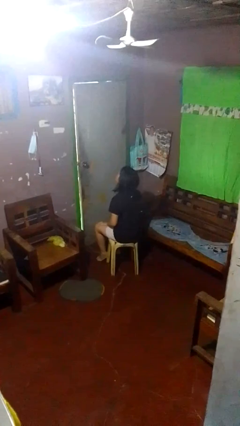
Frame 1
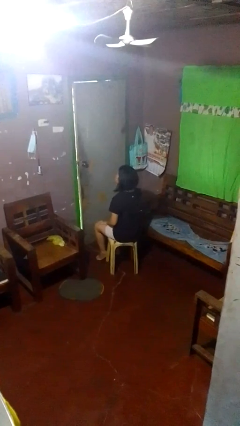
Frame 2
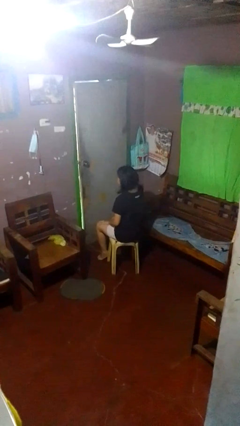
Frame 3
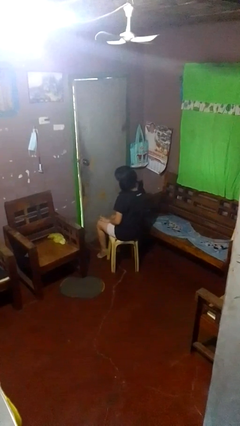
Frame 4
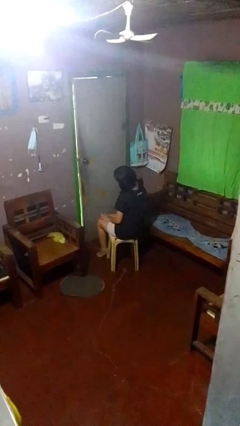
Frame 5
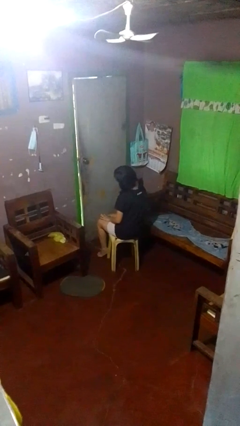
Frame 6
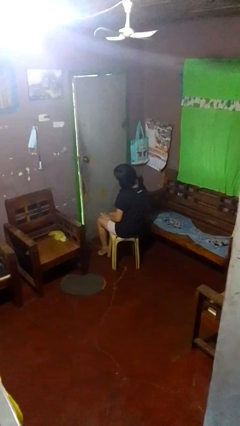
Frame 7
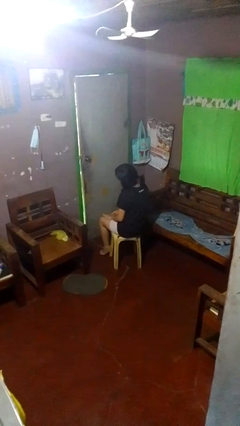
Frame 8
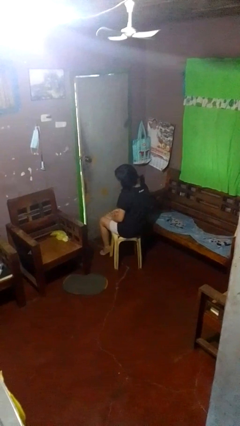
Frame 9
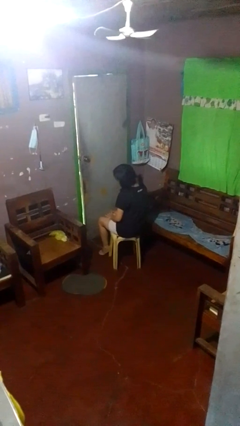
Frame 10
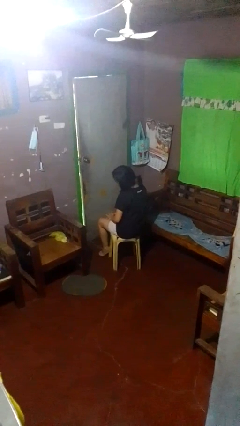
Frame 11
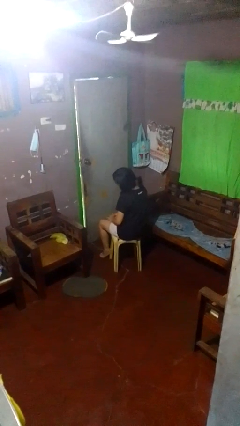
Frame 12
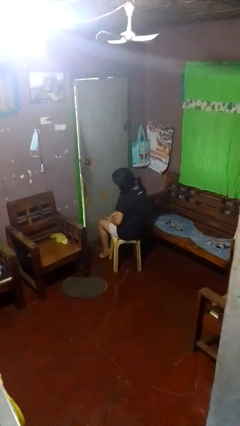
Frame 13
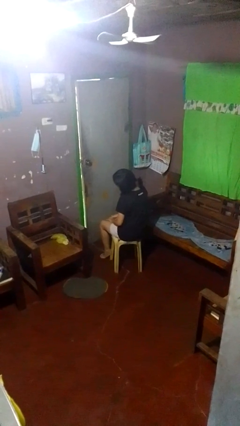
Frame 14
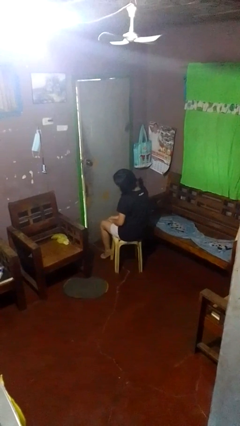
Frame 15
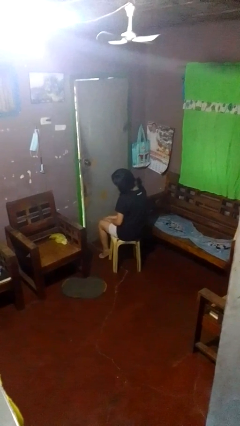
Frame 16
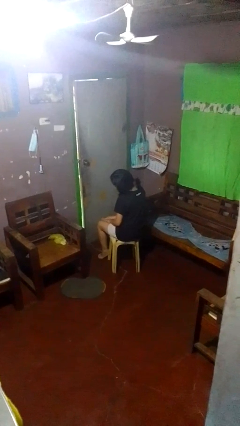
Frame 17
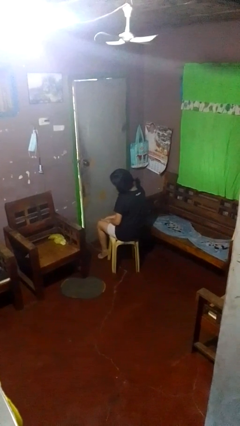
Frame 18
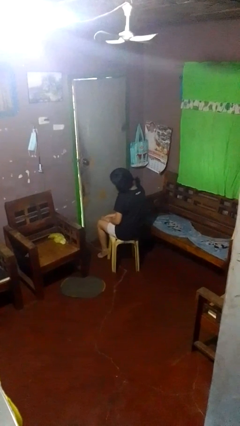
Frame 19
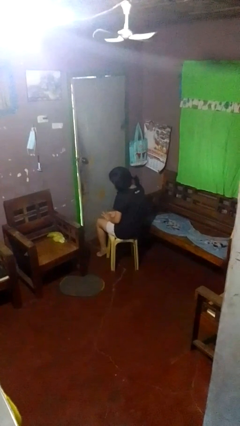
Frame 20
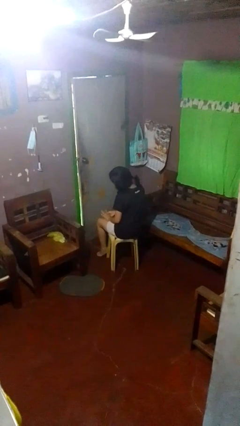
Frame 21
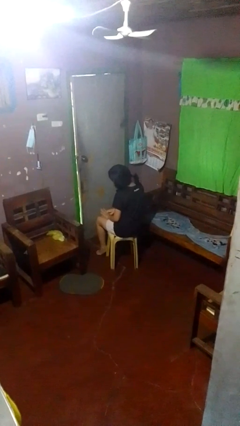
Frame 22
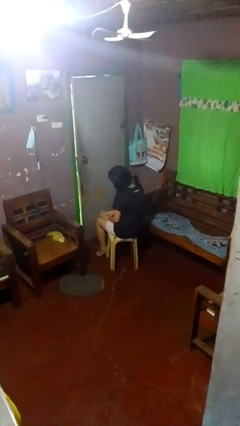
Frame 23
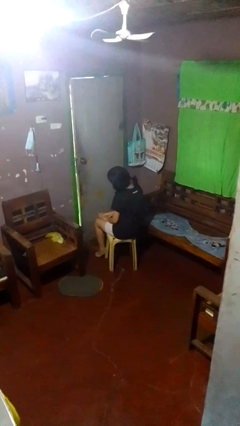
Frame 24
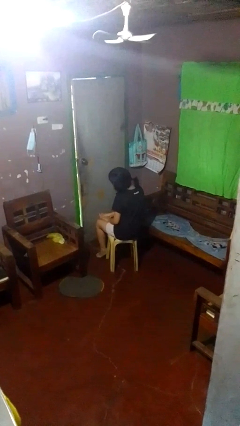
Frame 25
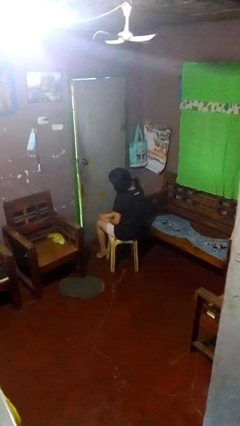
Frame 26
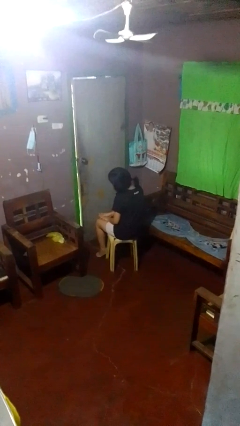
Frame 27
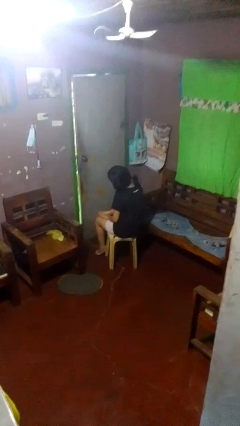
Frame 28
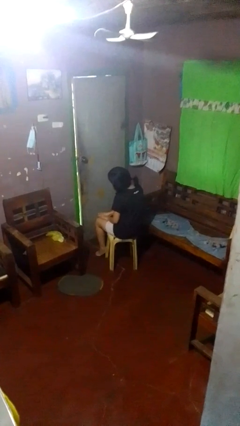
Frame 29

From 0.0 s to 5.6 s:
person looks at hands in lap

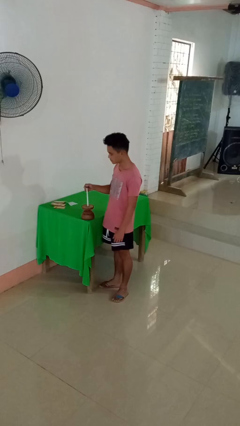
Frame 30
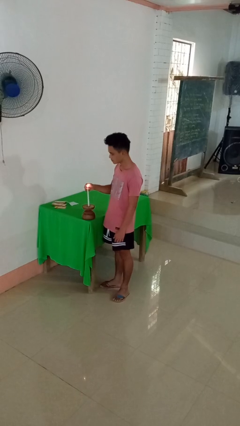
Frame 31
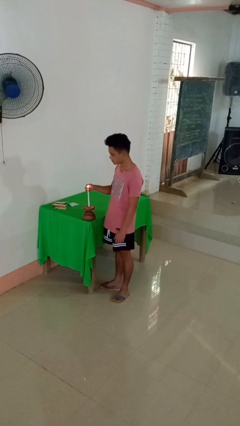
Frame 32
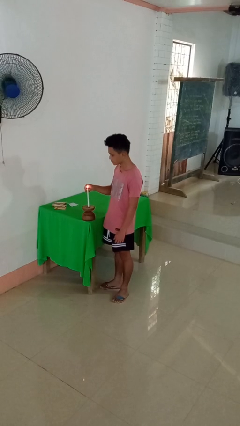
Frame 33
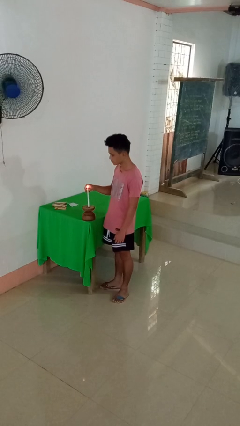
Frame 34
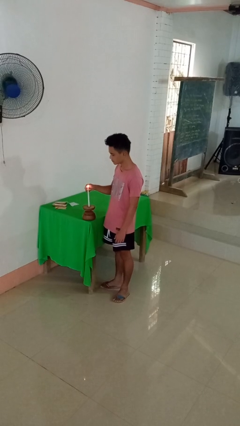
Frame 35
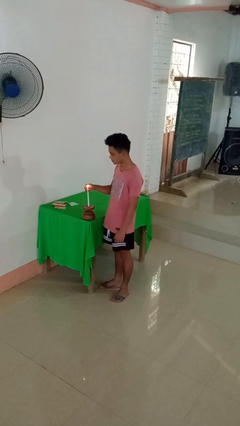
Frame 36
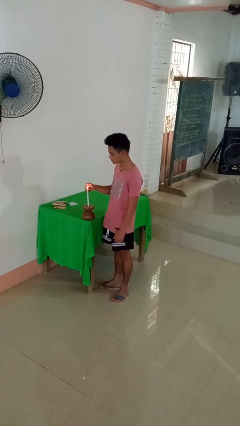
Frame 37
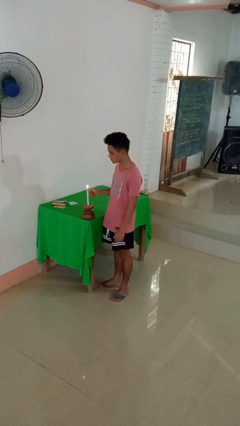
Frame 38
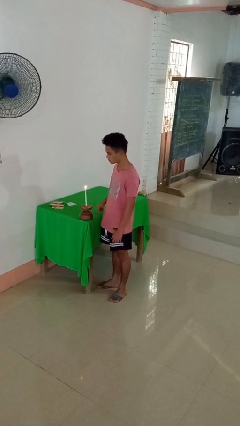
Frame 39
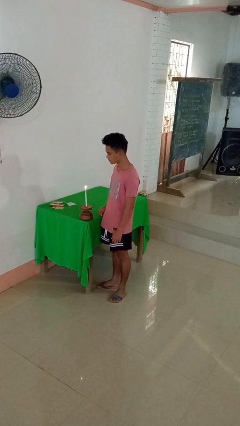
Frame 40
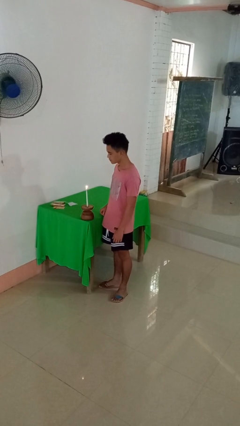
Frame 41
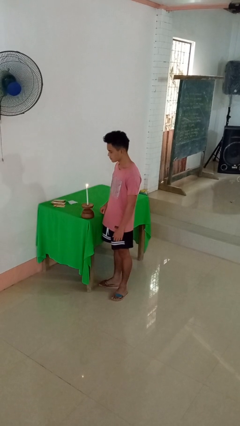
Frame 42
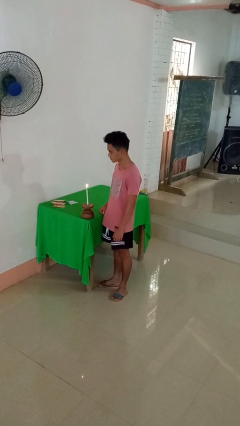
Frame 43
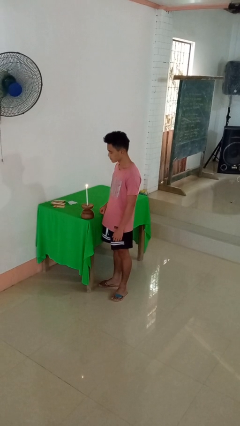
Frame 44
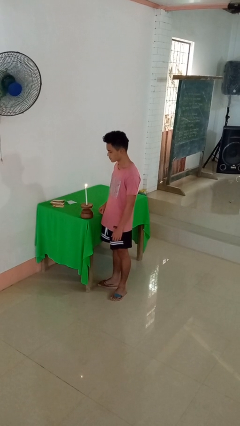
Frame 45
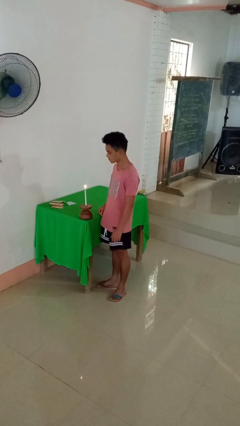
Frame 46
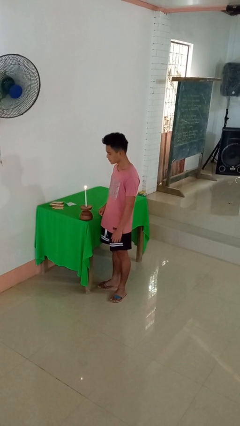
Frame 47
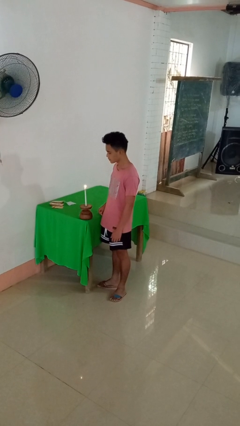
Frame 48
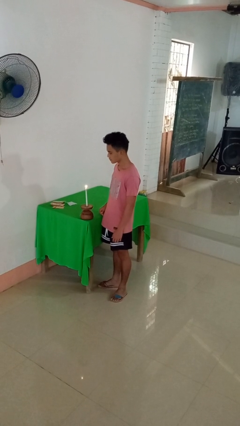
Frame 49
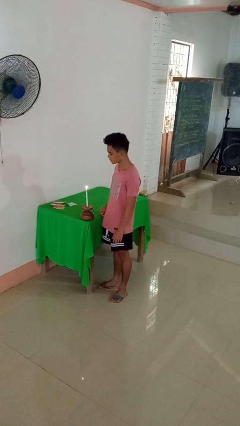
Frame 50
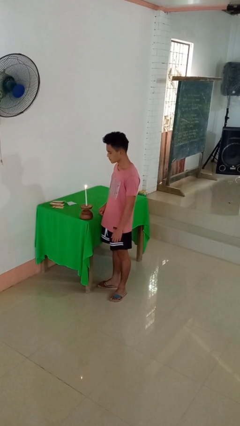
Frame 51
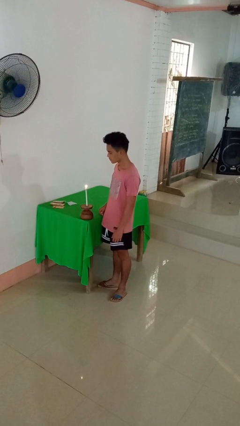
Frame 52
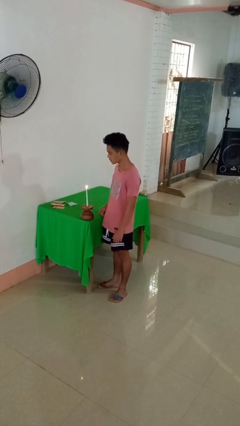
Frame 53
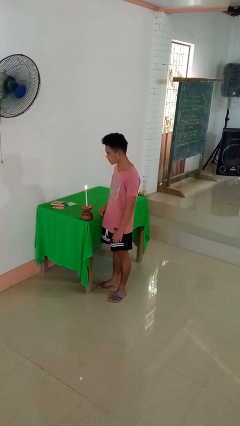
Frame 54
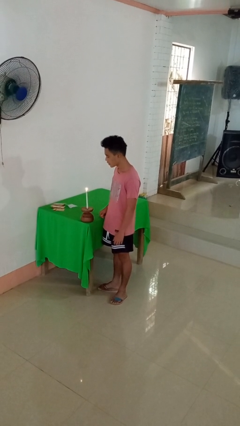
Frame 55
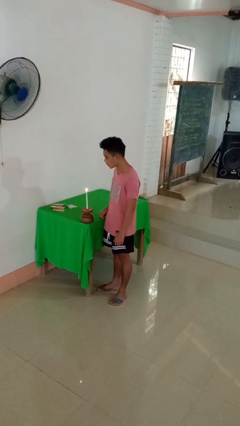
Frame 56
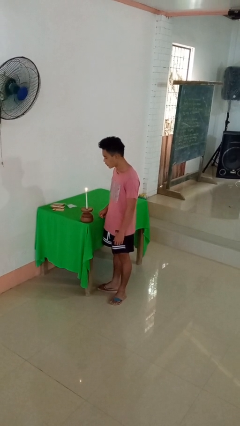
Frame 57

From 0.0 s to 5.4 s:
person lights candle

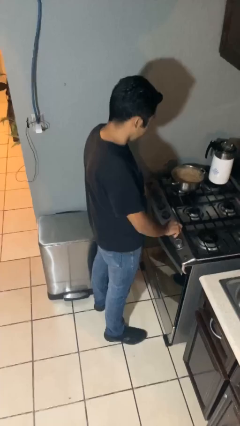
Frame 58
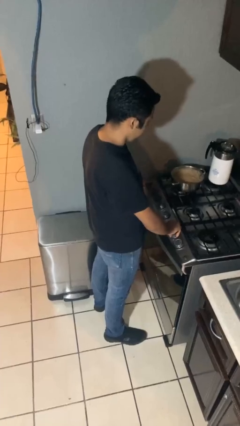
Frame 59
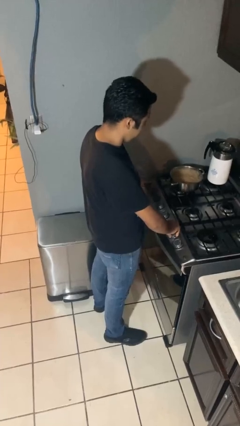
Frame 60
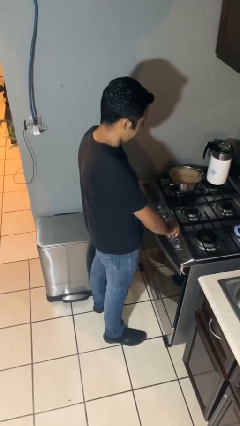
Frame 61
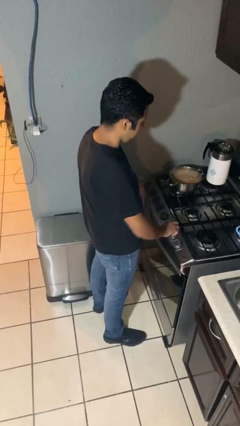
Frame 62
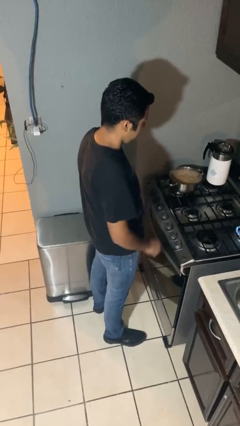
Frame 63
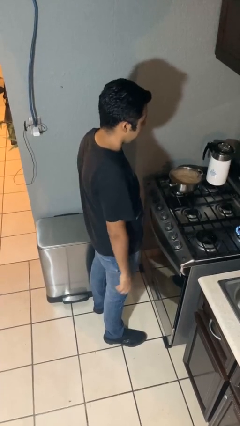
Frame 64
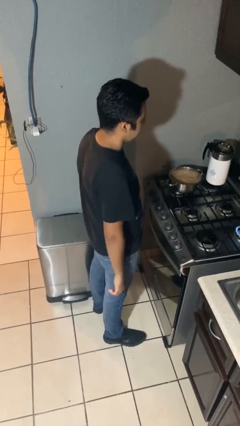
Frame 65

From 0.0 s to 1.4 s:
person turns on stovetop

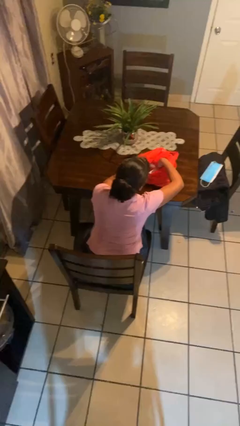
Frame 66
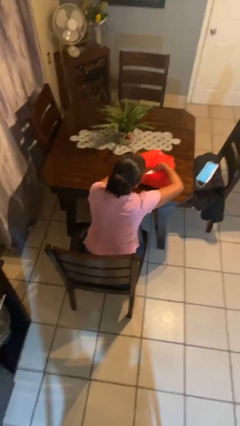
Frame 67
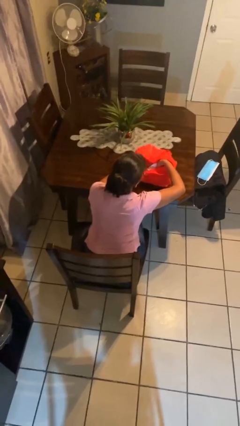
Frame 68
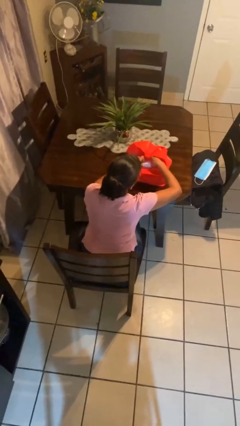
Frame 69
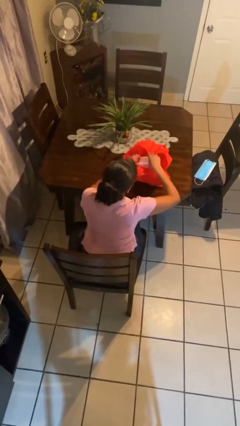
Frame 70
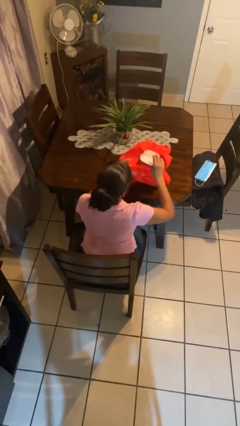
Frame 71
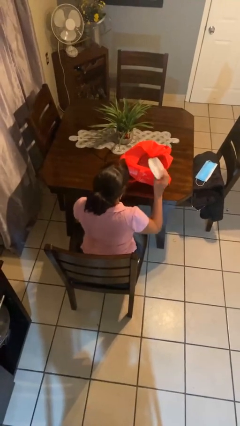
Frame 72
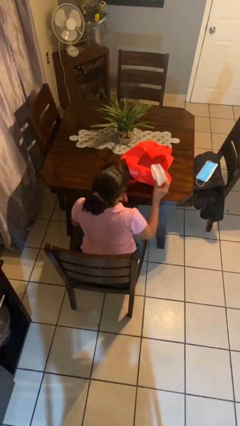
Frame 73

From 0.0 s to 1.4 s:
person takes object from bag

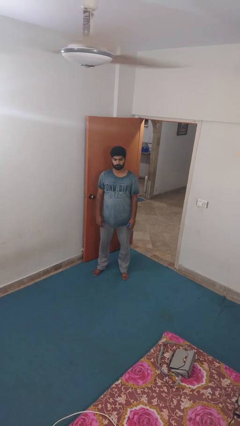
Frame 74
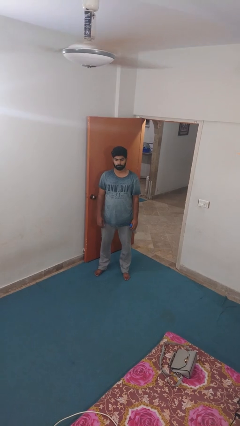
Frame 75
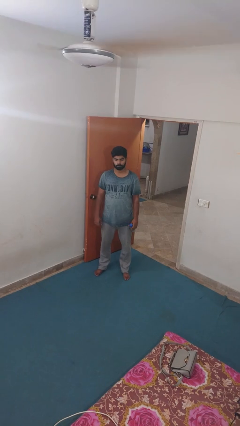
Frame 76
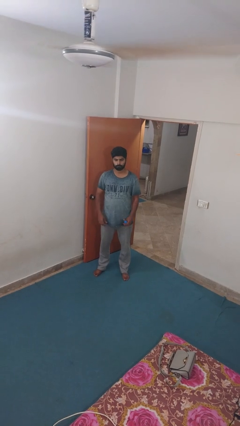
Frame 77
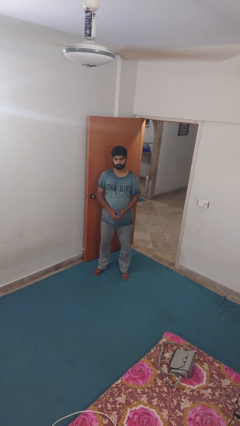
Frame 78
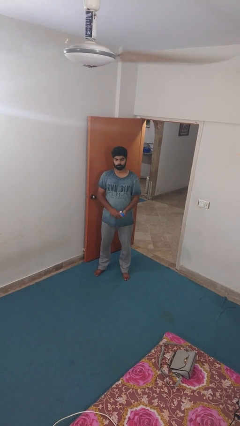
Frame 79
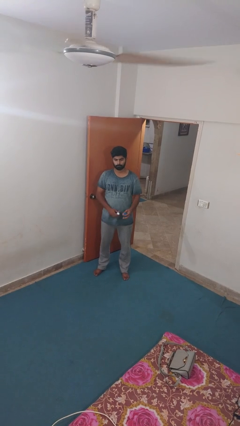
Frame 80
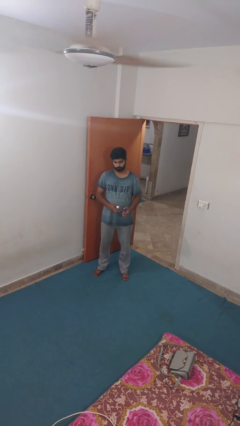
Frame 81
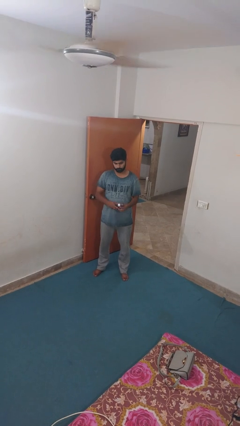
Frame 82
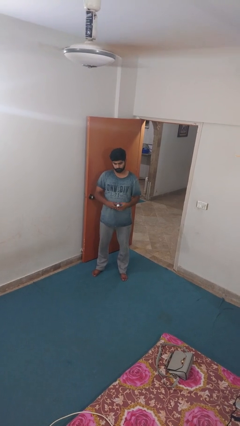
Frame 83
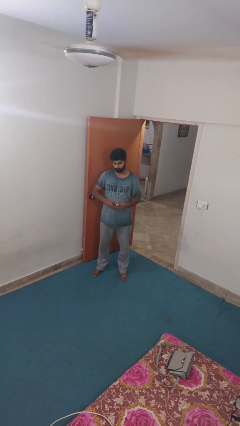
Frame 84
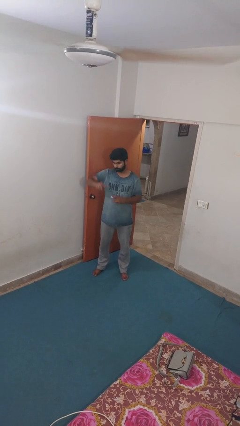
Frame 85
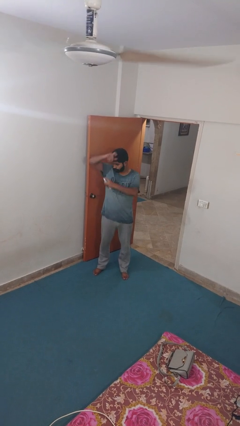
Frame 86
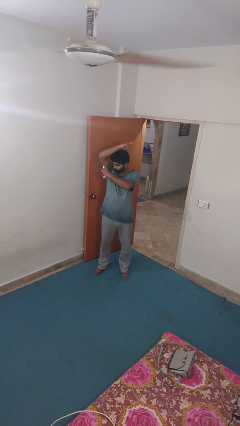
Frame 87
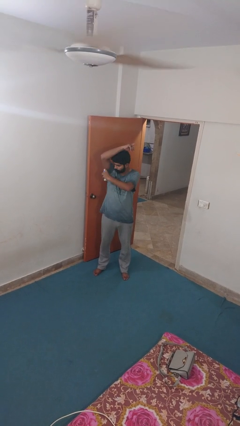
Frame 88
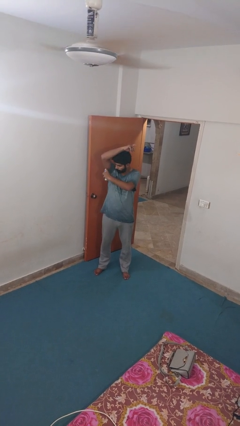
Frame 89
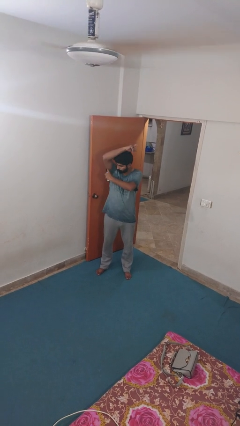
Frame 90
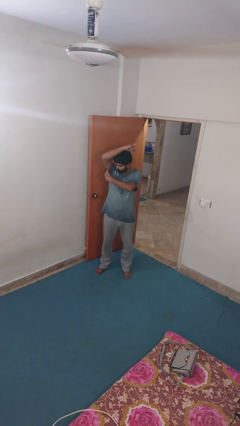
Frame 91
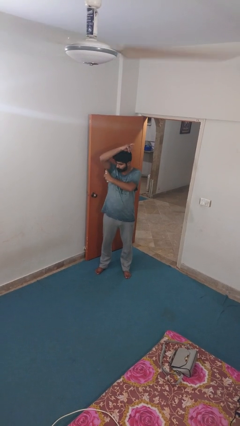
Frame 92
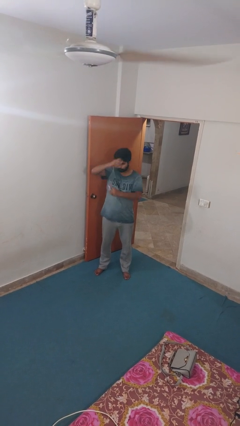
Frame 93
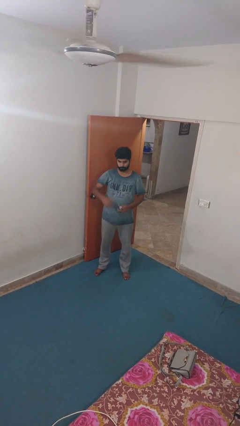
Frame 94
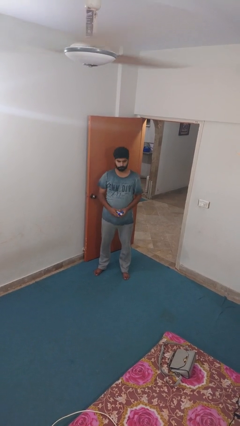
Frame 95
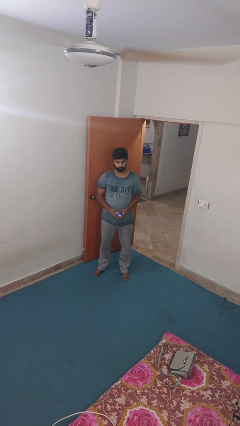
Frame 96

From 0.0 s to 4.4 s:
person applies deodorant
